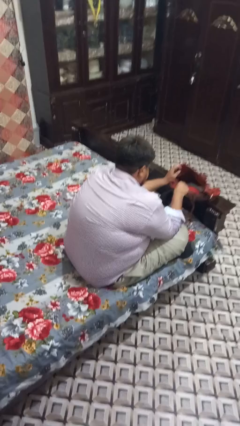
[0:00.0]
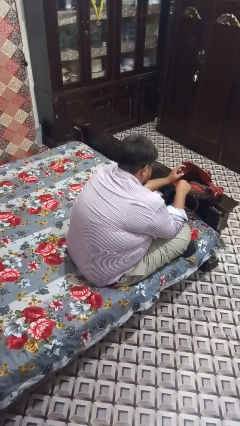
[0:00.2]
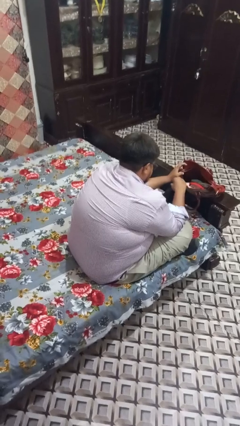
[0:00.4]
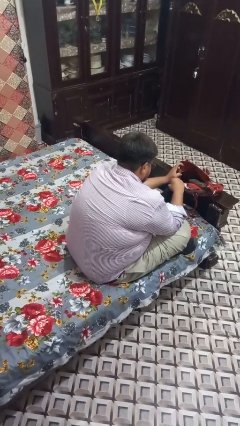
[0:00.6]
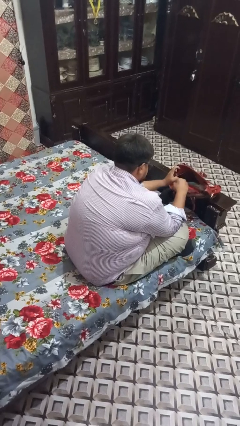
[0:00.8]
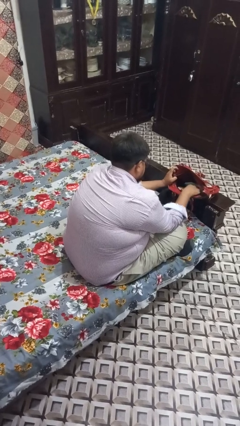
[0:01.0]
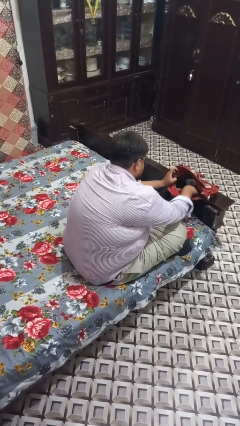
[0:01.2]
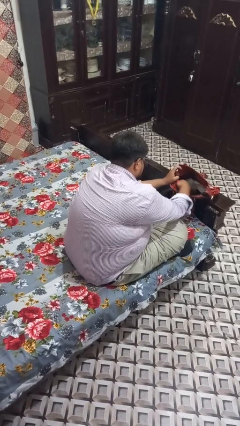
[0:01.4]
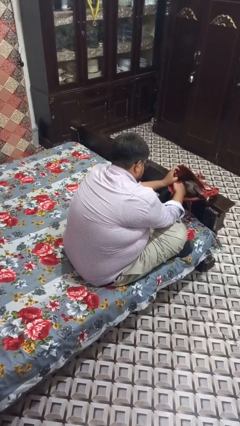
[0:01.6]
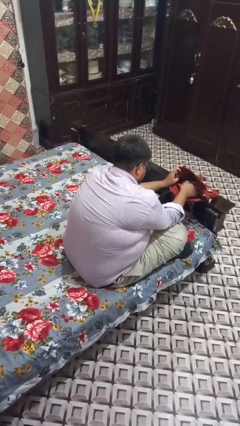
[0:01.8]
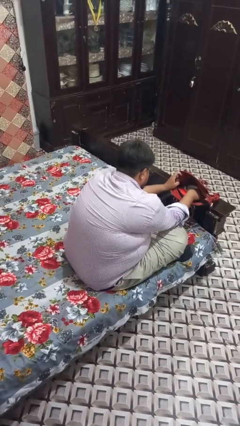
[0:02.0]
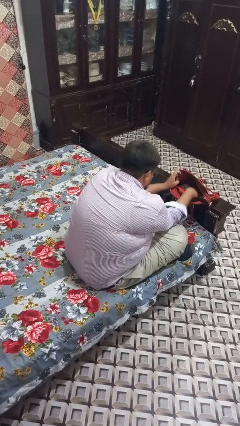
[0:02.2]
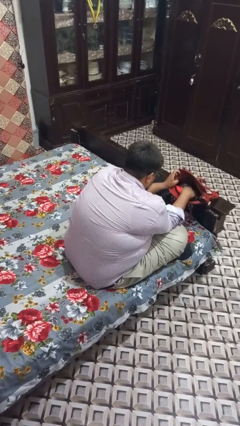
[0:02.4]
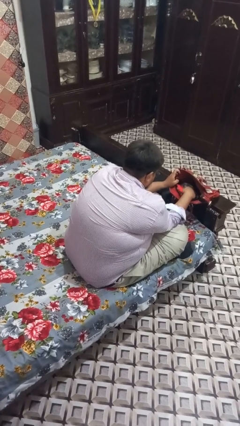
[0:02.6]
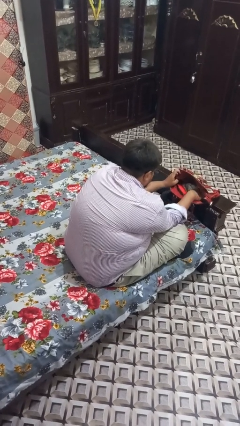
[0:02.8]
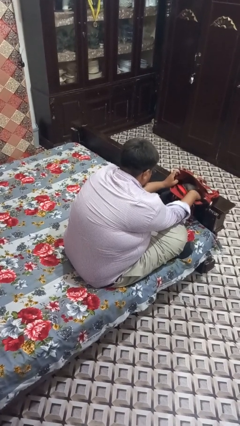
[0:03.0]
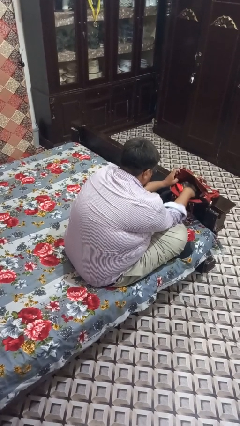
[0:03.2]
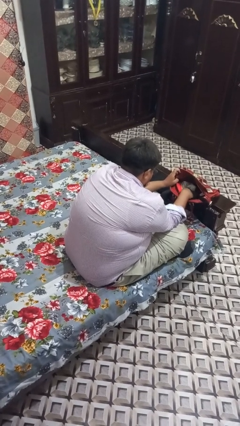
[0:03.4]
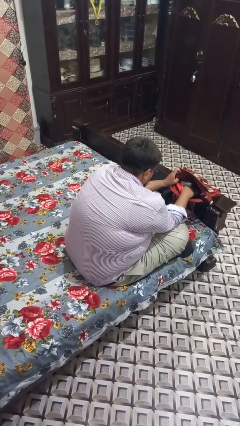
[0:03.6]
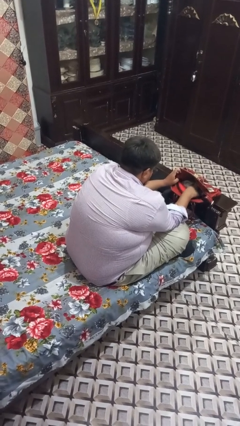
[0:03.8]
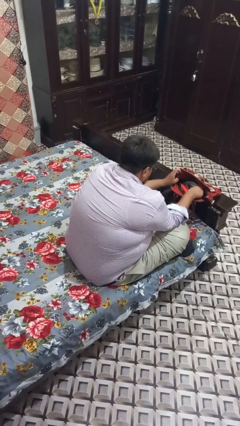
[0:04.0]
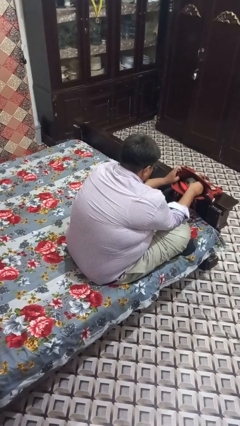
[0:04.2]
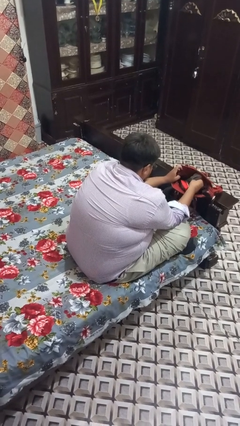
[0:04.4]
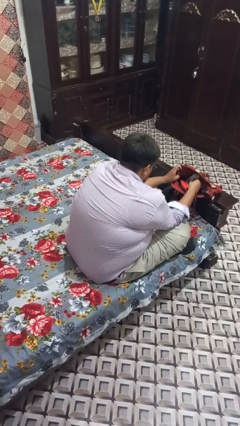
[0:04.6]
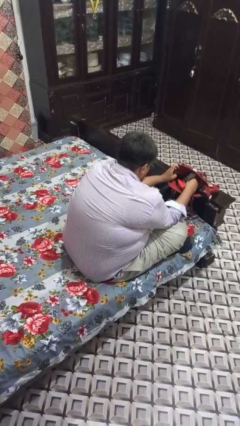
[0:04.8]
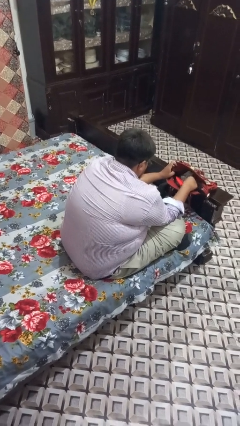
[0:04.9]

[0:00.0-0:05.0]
person searches in purse

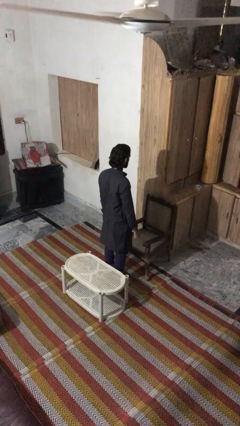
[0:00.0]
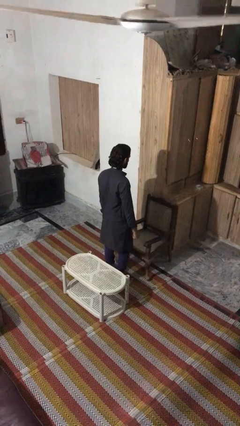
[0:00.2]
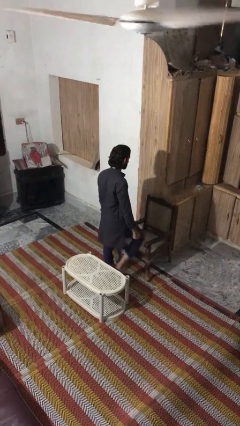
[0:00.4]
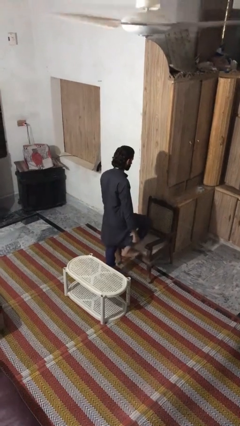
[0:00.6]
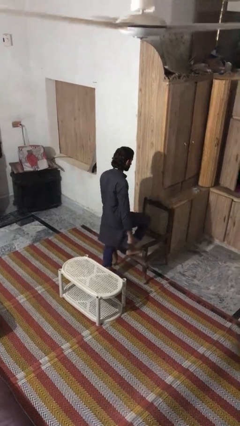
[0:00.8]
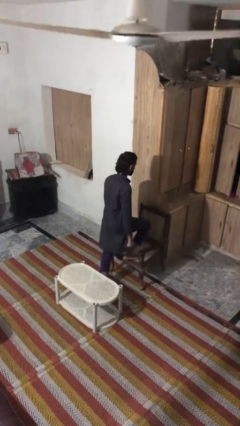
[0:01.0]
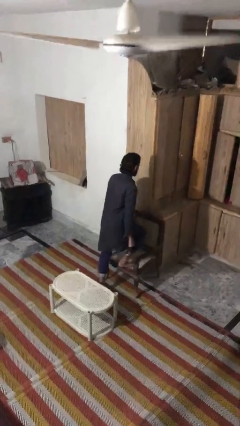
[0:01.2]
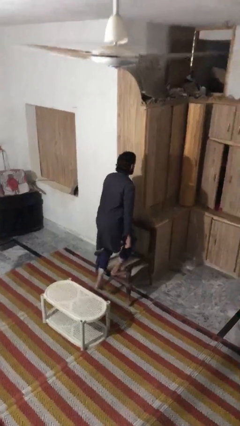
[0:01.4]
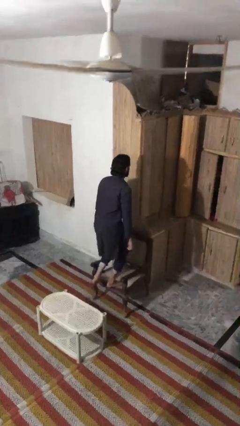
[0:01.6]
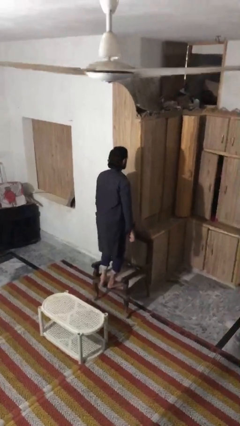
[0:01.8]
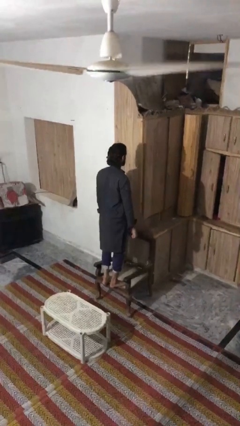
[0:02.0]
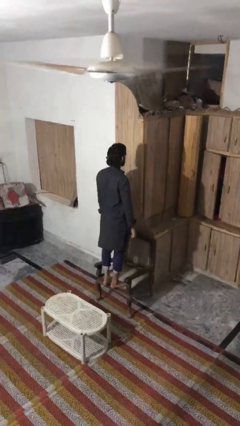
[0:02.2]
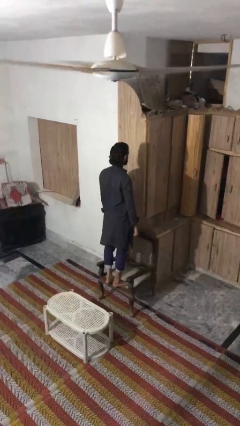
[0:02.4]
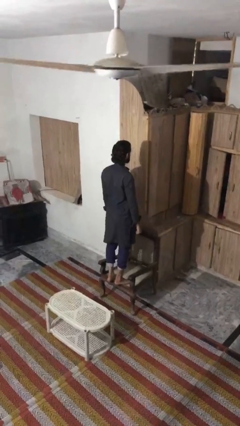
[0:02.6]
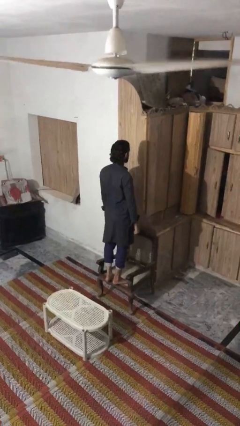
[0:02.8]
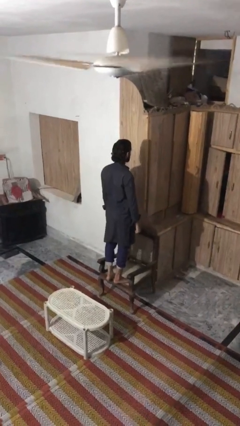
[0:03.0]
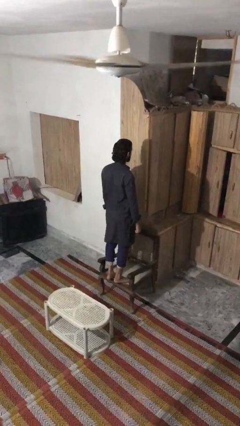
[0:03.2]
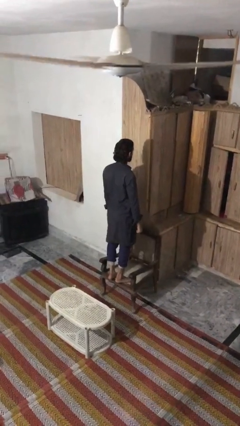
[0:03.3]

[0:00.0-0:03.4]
person climbs on chair

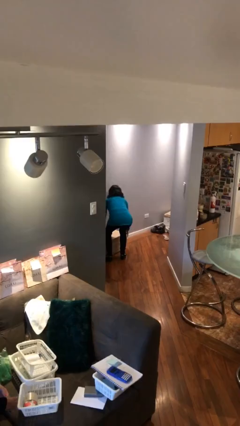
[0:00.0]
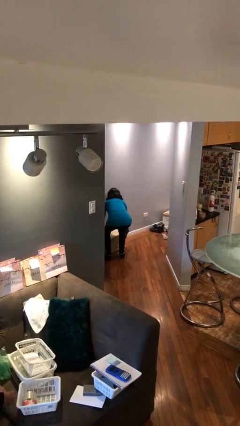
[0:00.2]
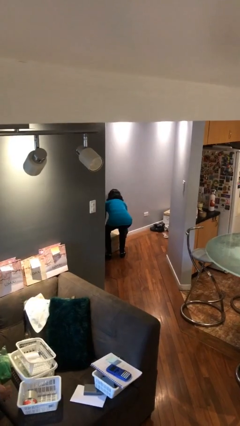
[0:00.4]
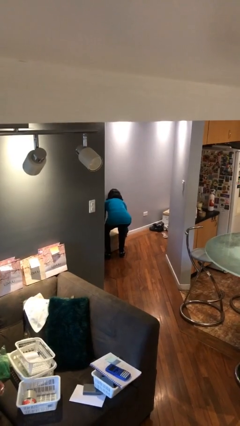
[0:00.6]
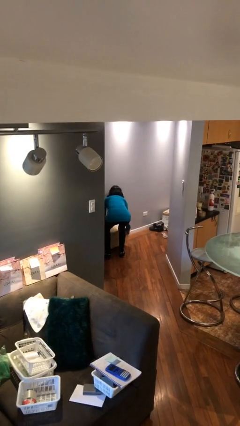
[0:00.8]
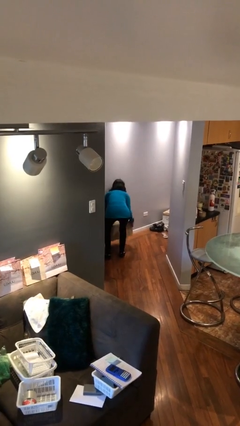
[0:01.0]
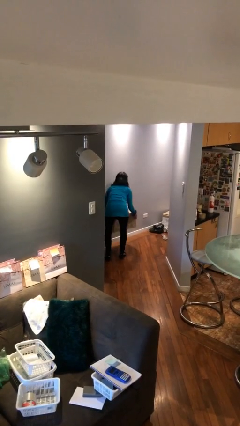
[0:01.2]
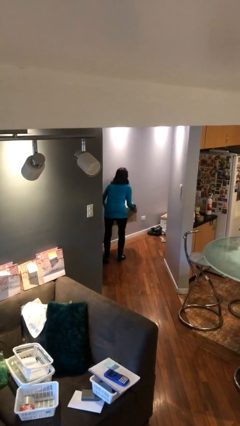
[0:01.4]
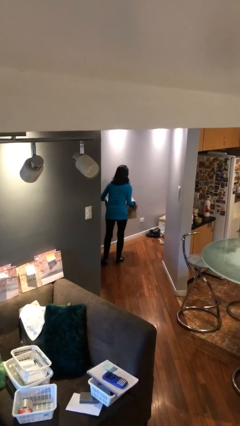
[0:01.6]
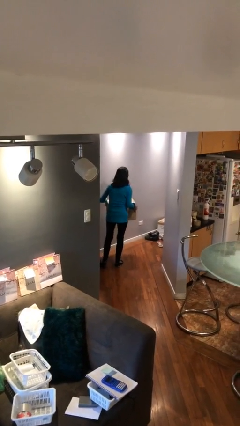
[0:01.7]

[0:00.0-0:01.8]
person picks up object from floor

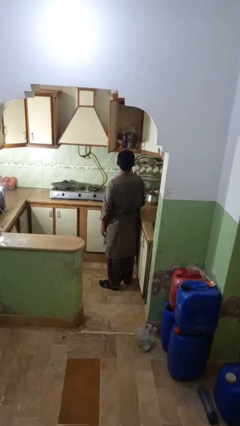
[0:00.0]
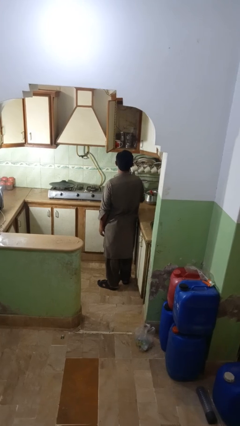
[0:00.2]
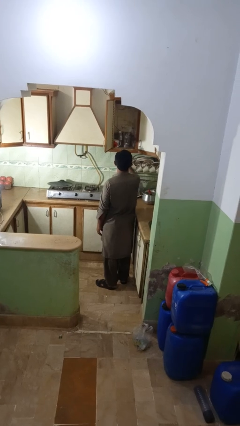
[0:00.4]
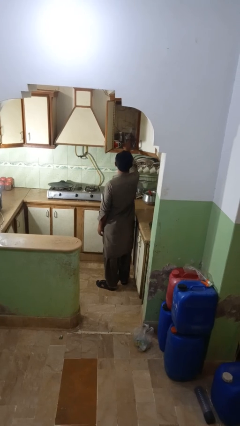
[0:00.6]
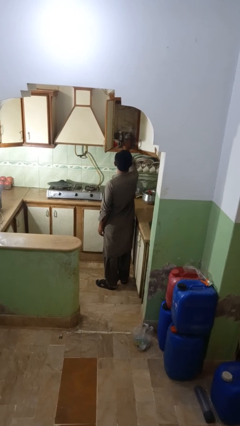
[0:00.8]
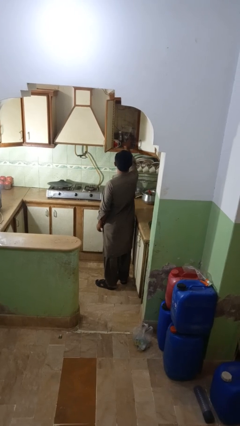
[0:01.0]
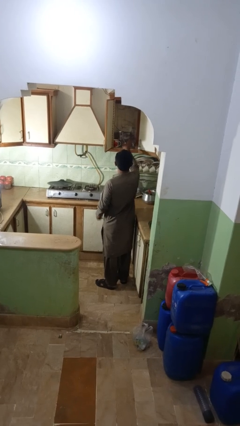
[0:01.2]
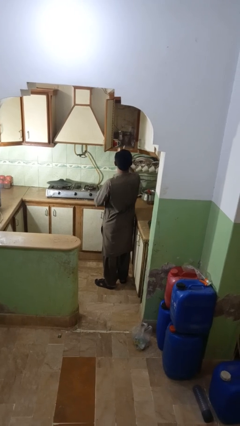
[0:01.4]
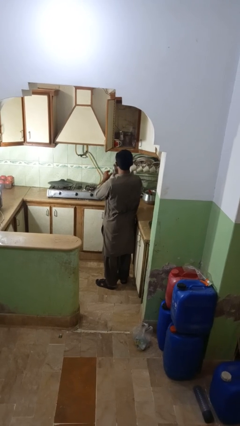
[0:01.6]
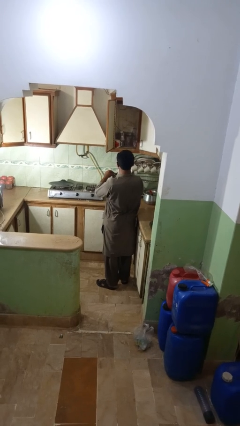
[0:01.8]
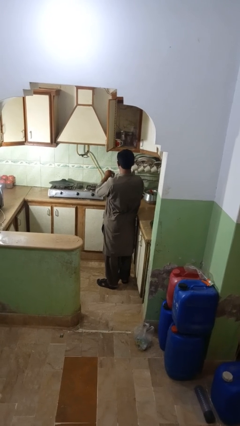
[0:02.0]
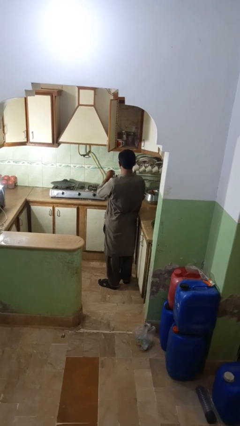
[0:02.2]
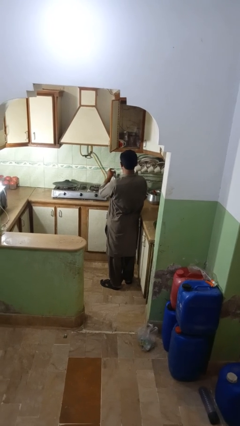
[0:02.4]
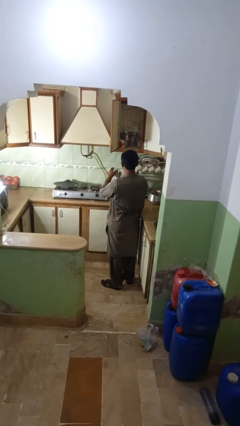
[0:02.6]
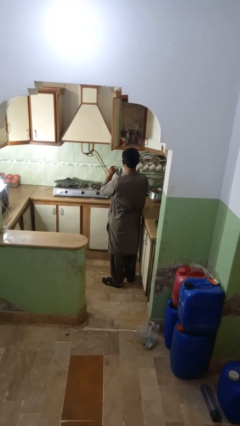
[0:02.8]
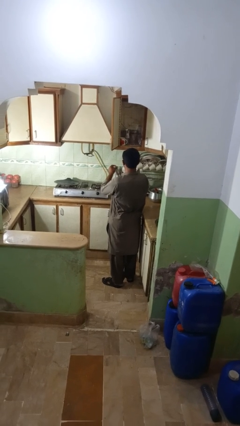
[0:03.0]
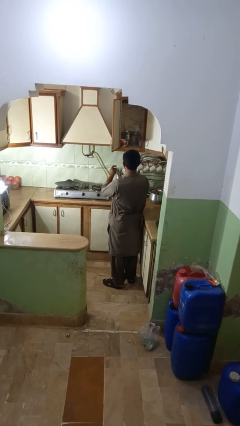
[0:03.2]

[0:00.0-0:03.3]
person takes object from kitchen drawer

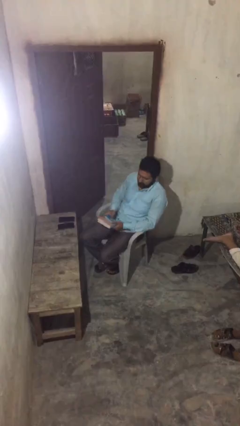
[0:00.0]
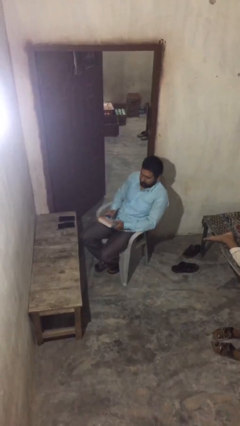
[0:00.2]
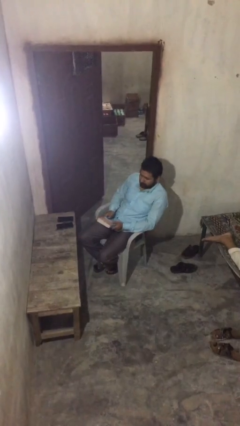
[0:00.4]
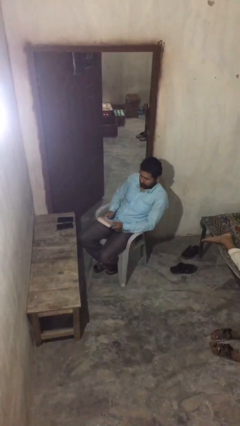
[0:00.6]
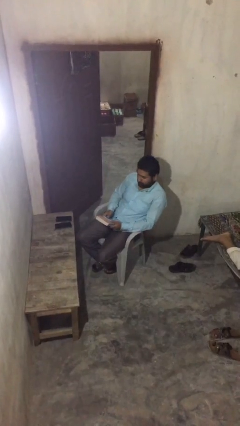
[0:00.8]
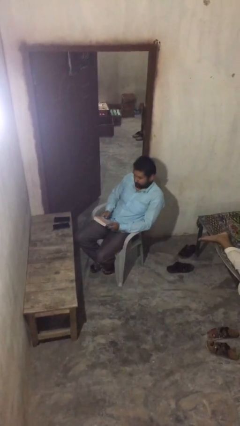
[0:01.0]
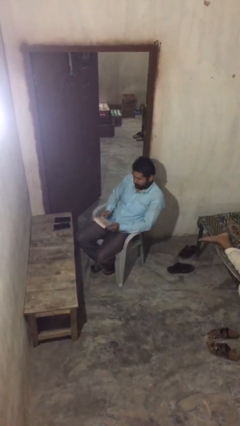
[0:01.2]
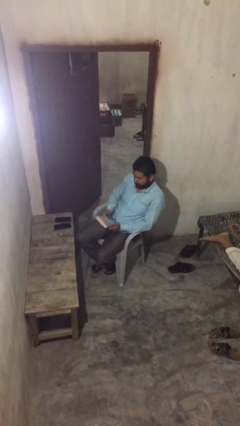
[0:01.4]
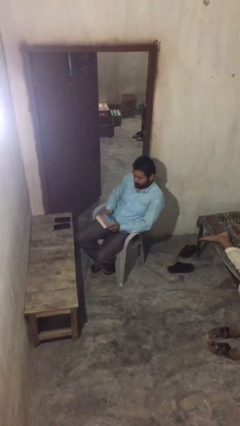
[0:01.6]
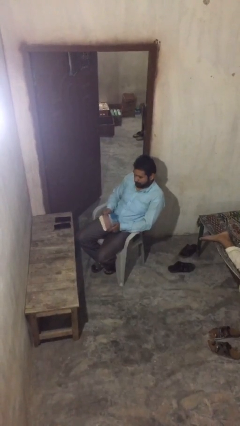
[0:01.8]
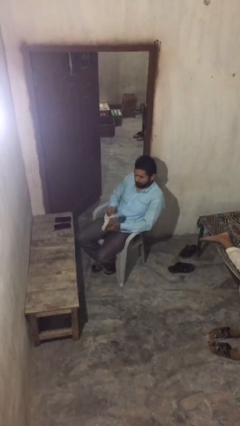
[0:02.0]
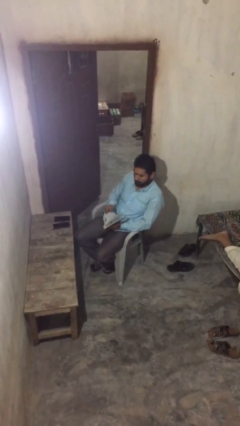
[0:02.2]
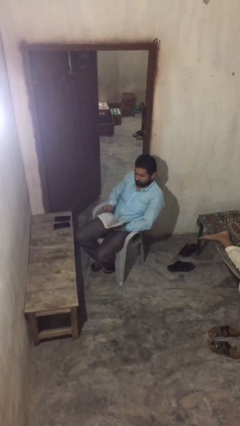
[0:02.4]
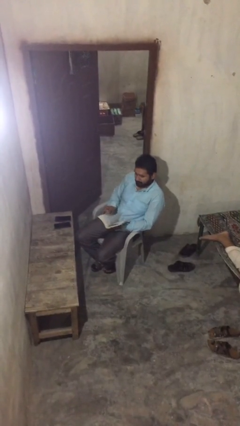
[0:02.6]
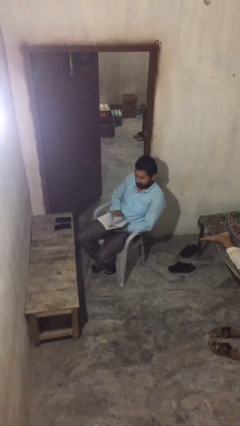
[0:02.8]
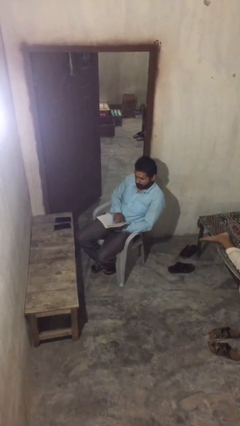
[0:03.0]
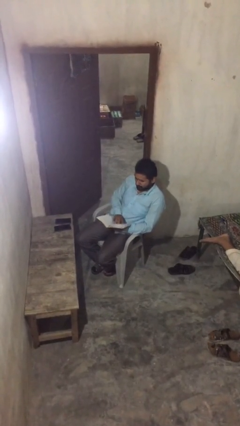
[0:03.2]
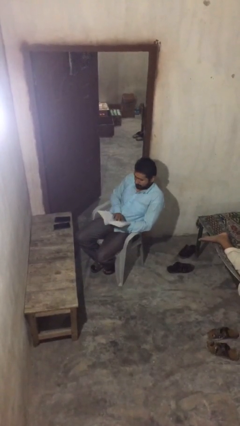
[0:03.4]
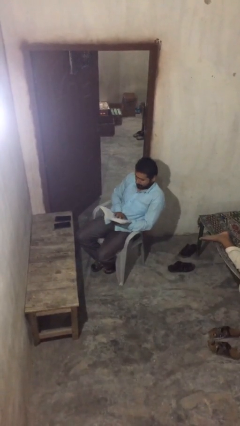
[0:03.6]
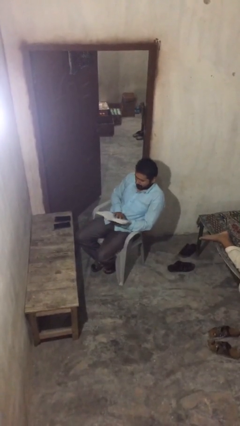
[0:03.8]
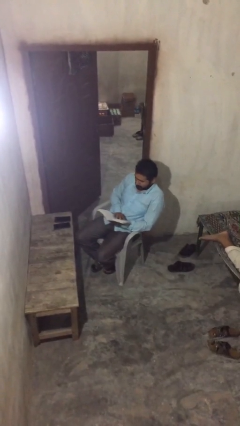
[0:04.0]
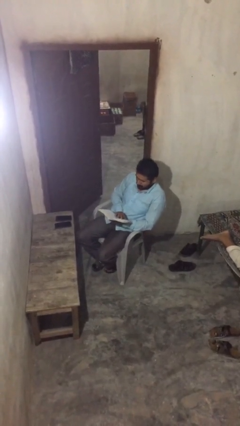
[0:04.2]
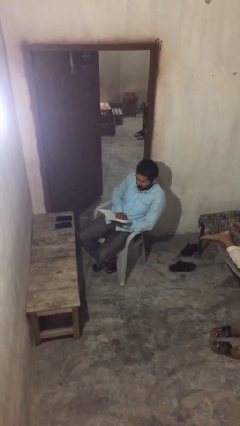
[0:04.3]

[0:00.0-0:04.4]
person reads document
